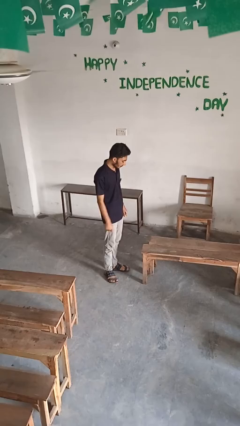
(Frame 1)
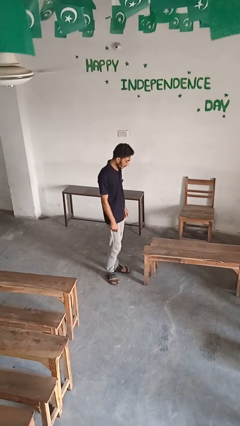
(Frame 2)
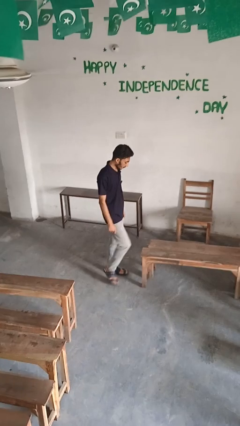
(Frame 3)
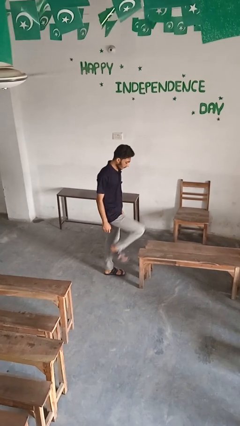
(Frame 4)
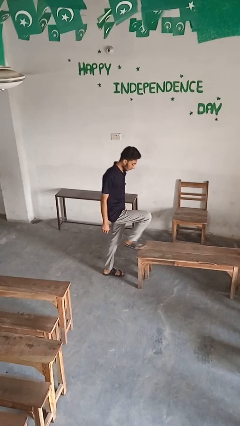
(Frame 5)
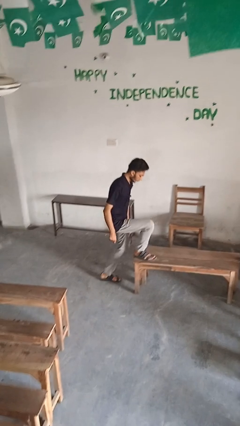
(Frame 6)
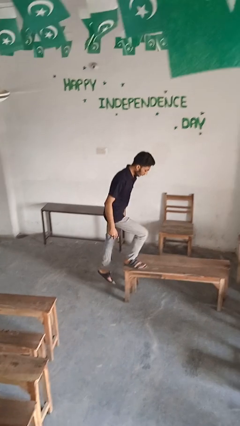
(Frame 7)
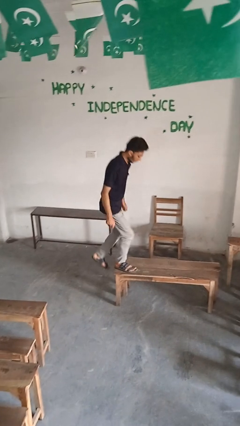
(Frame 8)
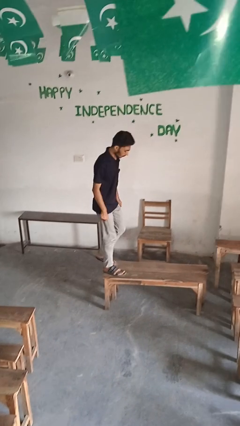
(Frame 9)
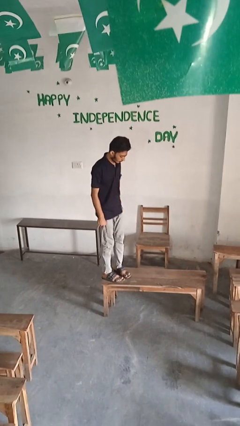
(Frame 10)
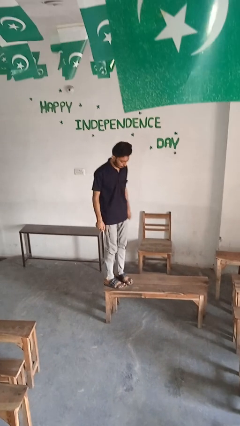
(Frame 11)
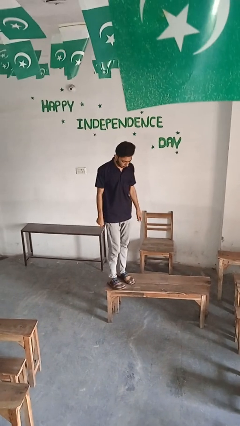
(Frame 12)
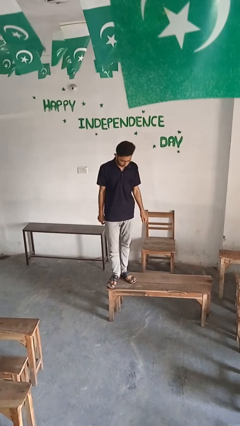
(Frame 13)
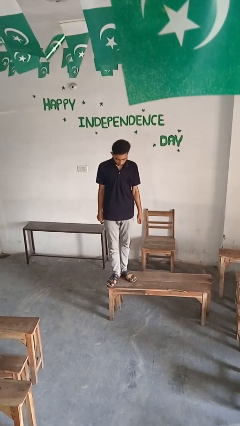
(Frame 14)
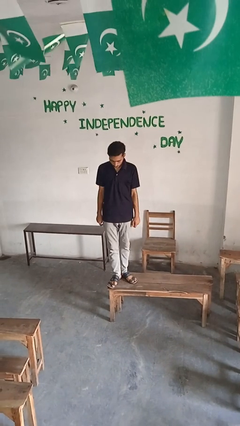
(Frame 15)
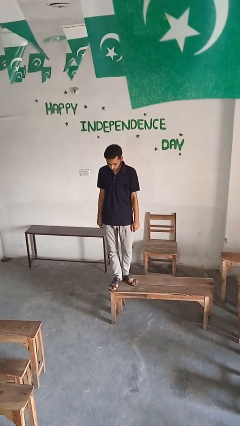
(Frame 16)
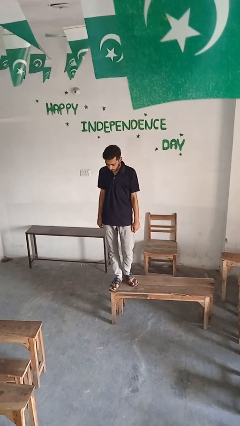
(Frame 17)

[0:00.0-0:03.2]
person climbs on table

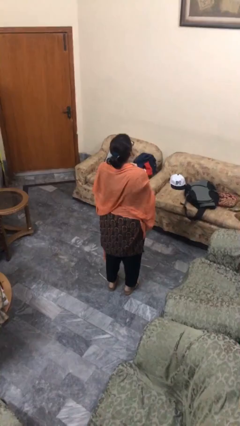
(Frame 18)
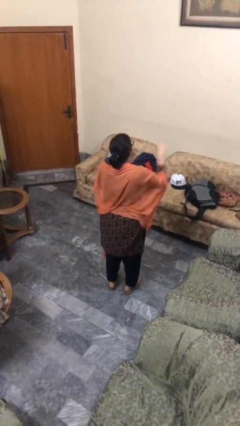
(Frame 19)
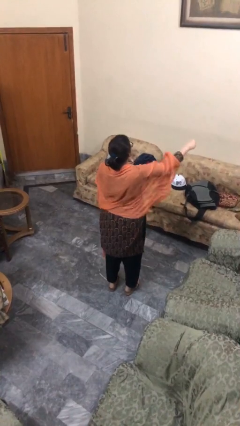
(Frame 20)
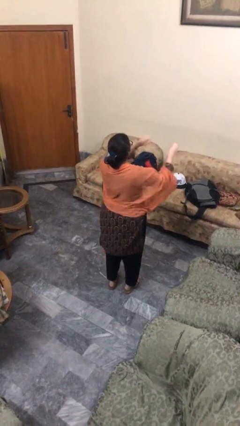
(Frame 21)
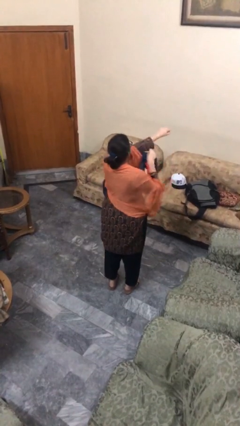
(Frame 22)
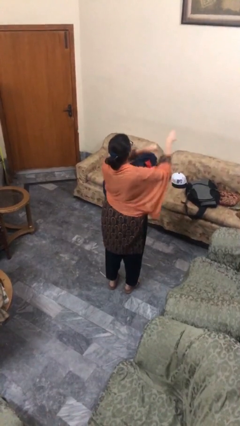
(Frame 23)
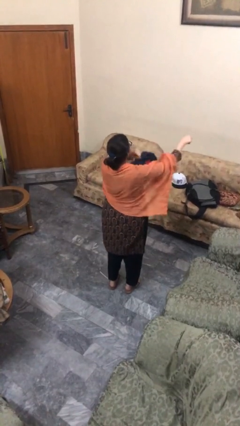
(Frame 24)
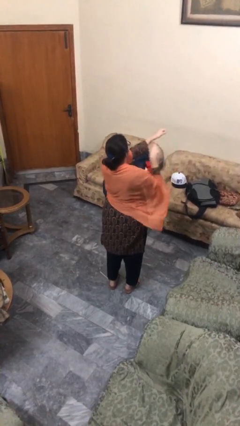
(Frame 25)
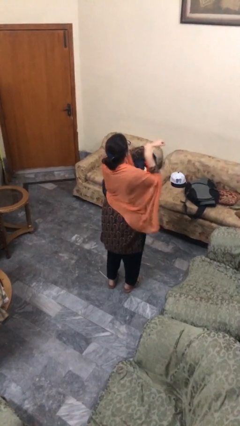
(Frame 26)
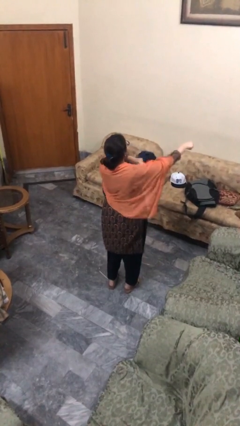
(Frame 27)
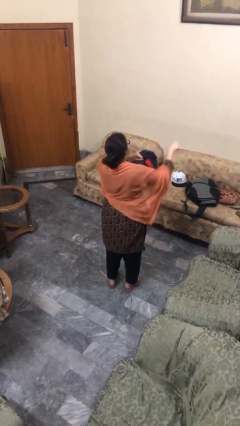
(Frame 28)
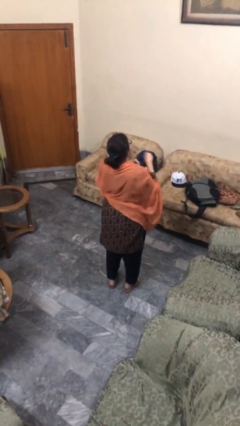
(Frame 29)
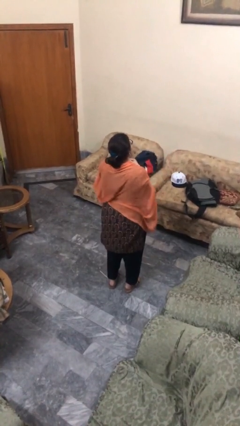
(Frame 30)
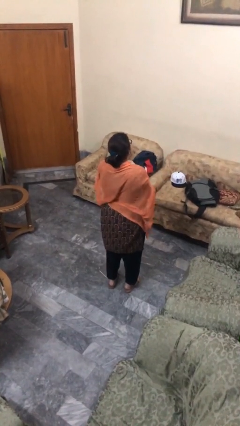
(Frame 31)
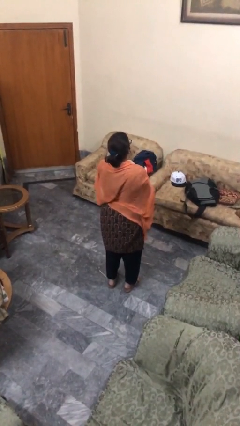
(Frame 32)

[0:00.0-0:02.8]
person punches

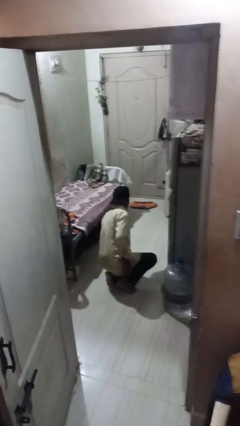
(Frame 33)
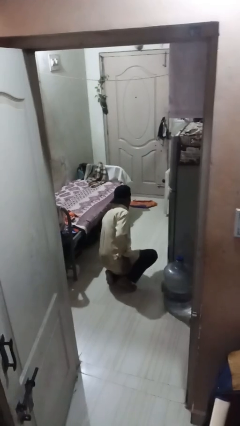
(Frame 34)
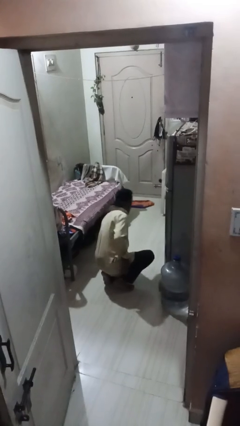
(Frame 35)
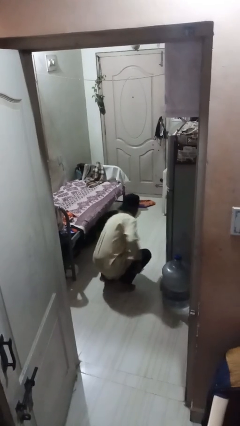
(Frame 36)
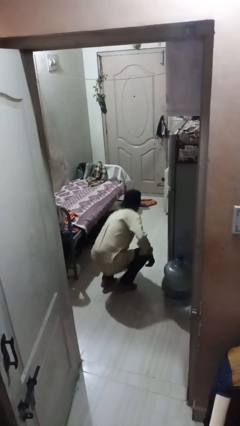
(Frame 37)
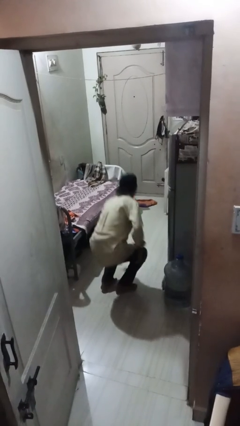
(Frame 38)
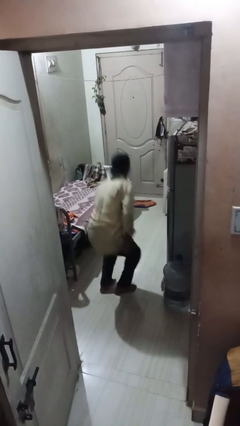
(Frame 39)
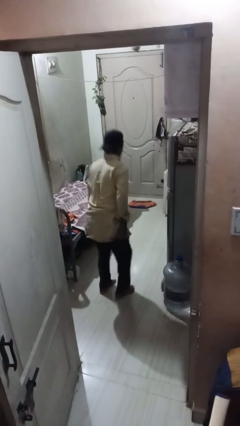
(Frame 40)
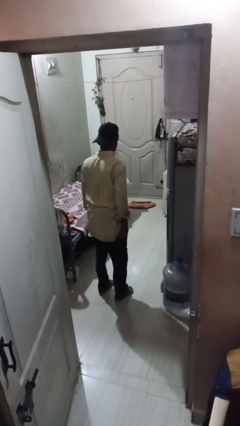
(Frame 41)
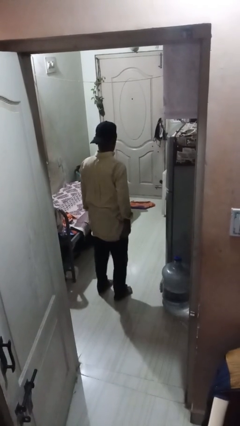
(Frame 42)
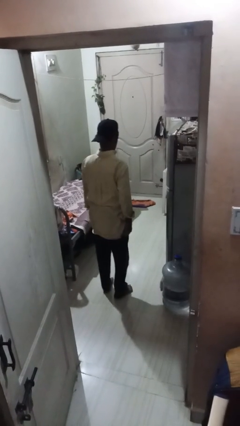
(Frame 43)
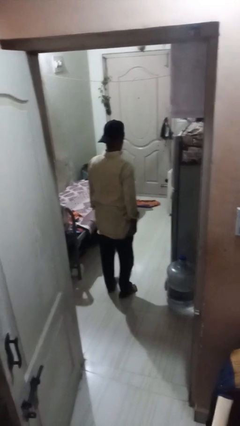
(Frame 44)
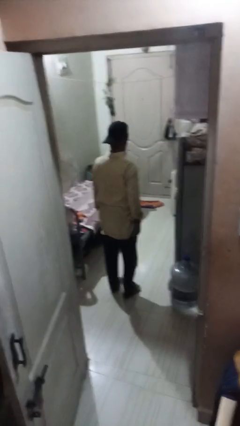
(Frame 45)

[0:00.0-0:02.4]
person stands up from floor

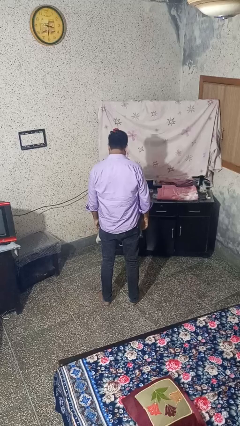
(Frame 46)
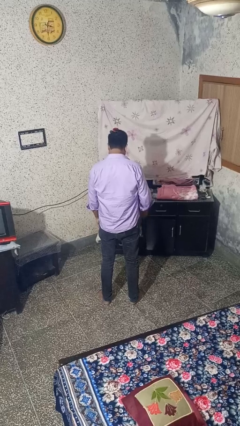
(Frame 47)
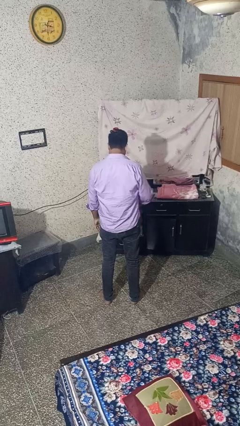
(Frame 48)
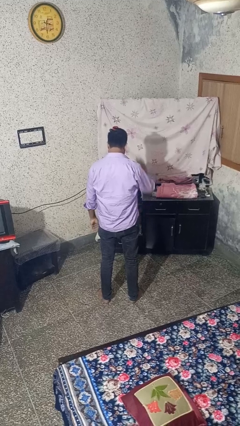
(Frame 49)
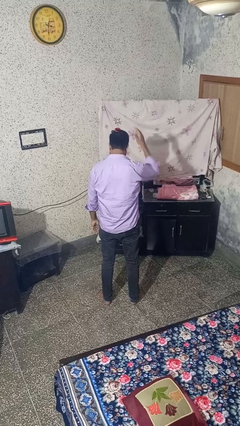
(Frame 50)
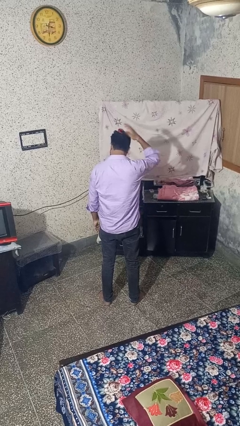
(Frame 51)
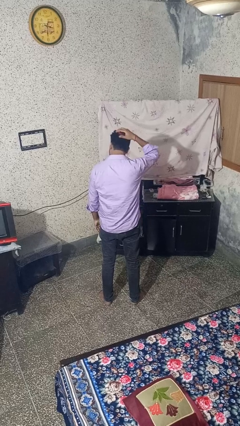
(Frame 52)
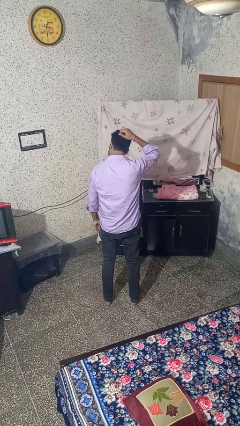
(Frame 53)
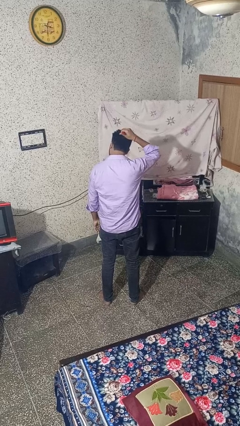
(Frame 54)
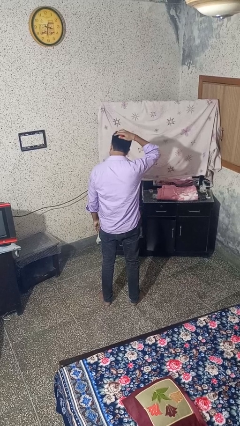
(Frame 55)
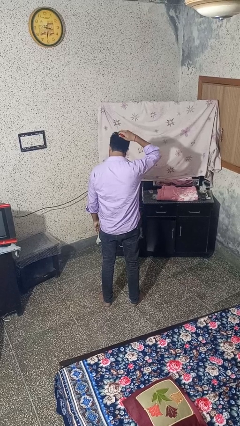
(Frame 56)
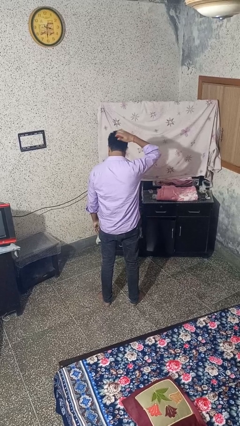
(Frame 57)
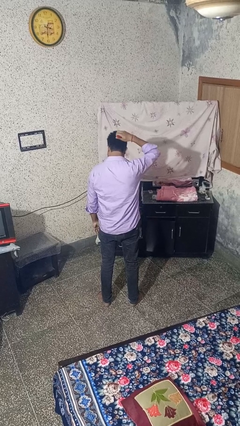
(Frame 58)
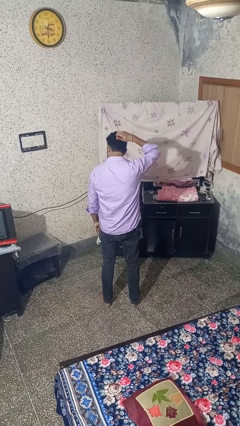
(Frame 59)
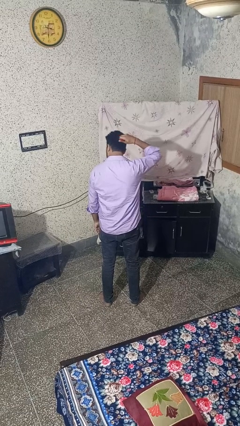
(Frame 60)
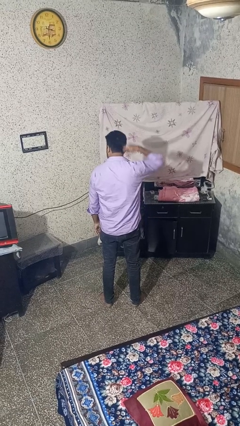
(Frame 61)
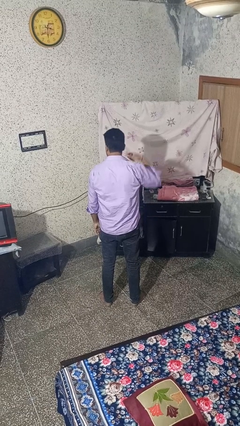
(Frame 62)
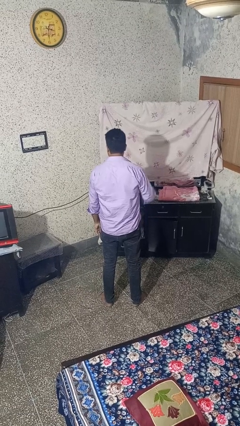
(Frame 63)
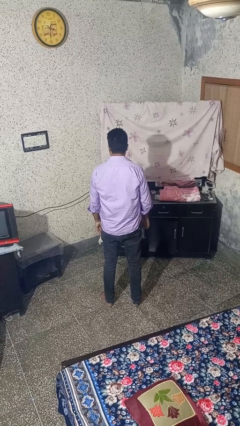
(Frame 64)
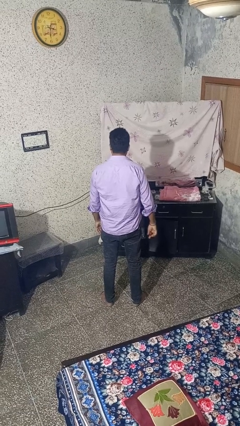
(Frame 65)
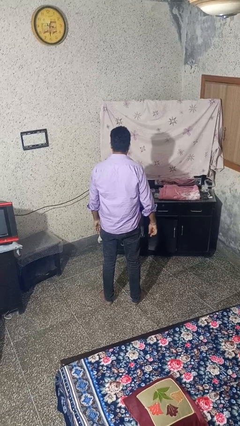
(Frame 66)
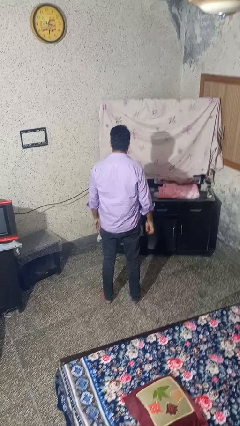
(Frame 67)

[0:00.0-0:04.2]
person takes off hairtie

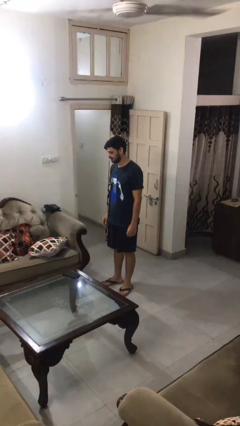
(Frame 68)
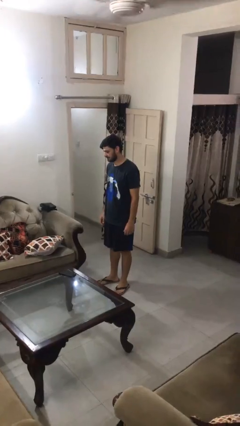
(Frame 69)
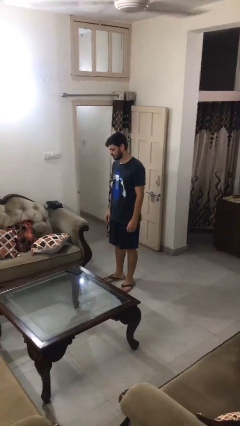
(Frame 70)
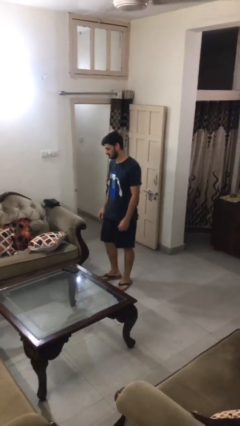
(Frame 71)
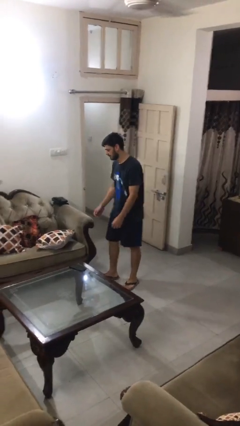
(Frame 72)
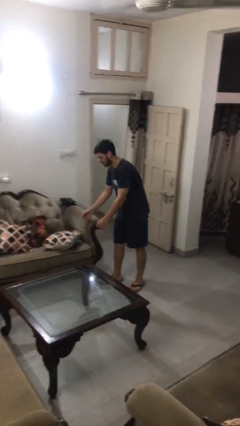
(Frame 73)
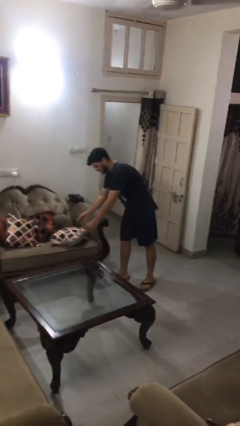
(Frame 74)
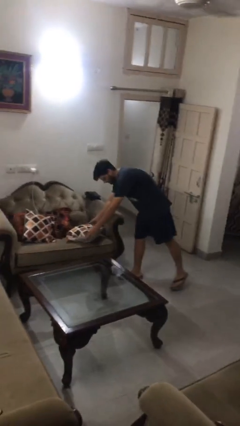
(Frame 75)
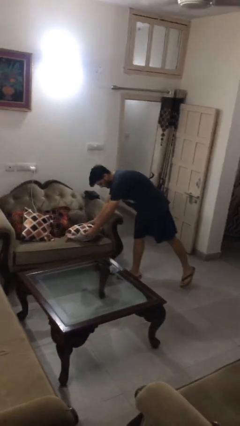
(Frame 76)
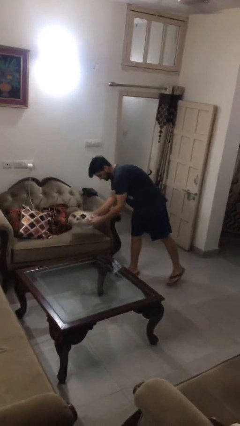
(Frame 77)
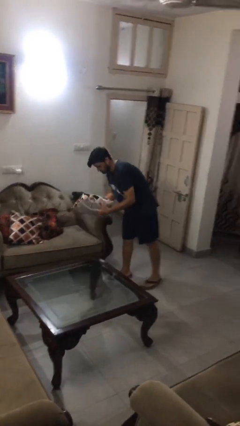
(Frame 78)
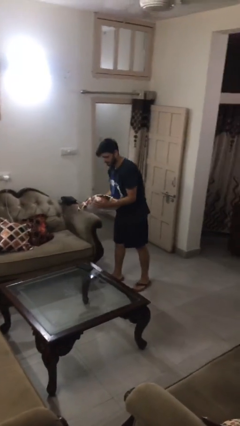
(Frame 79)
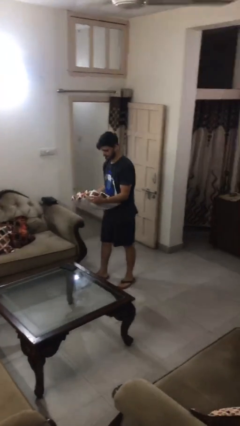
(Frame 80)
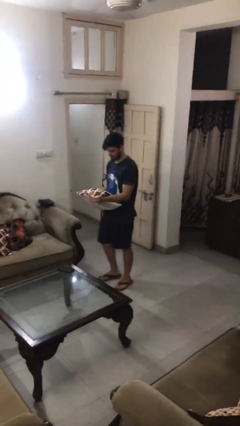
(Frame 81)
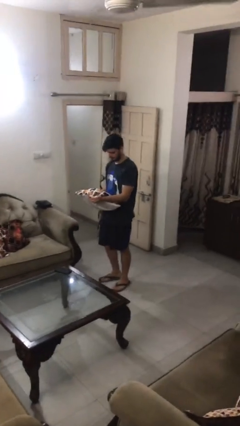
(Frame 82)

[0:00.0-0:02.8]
person picks up object from couch

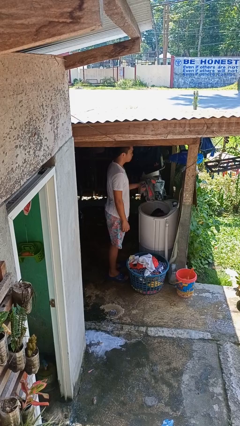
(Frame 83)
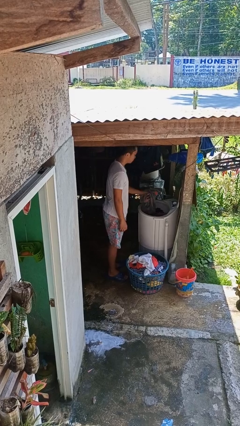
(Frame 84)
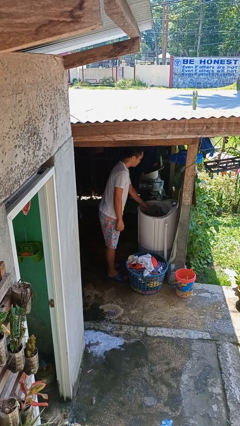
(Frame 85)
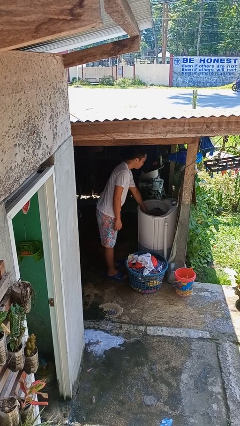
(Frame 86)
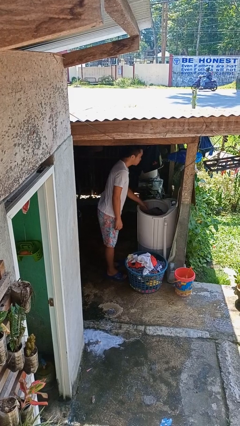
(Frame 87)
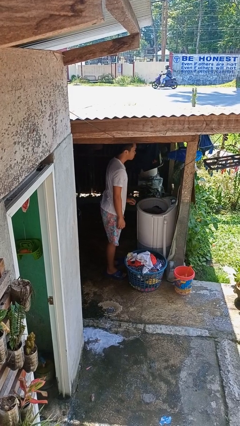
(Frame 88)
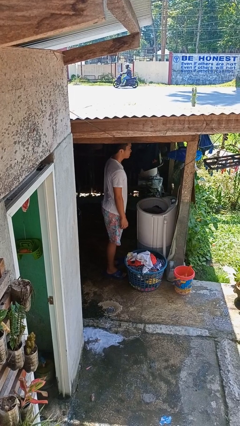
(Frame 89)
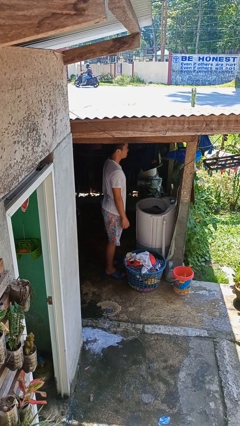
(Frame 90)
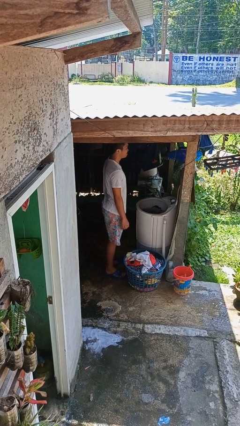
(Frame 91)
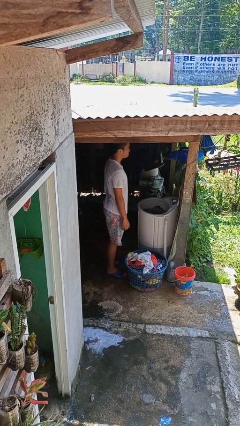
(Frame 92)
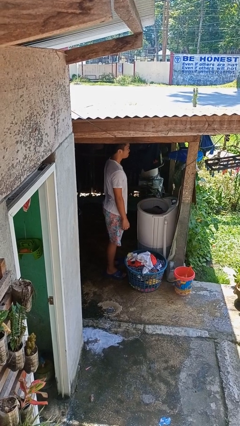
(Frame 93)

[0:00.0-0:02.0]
person loads clotheswasher
